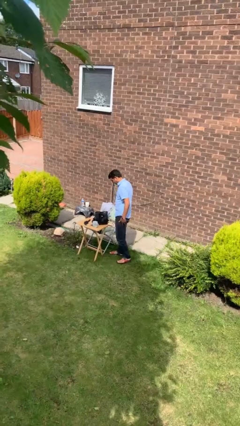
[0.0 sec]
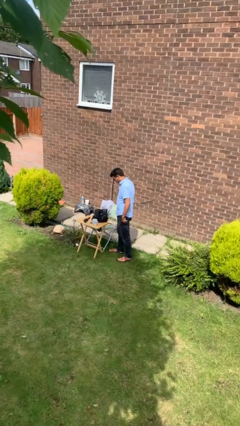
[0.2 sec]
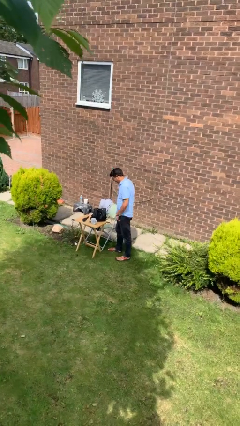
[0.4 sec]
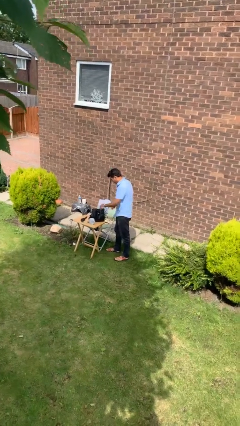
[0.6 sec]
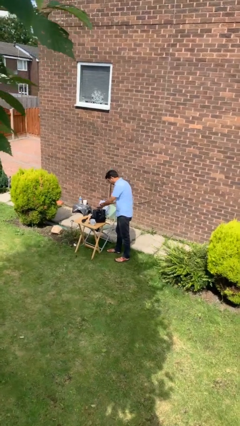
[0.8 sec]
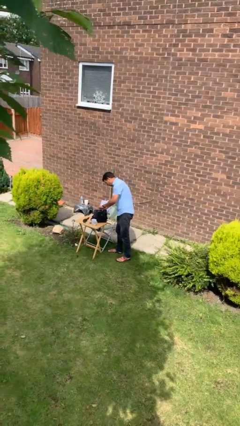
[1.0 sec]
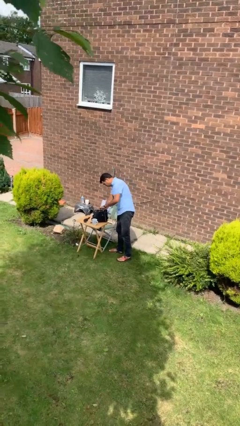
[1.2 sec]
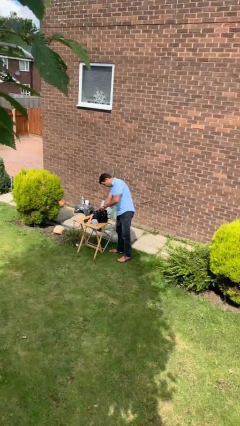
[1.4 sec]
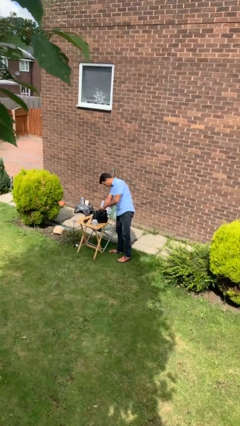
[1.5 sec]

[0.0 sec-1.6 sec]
person searches in backpack

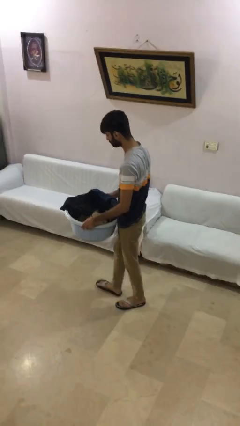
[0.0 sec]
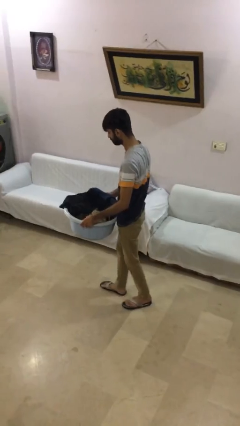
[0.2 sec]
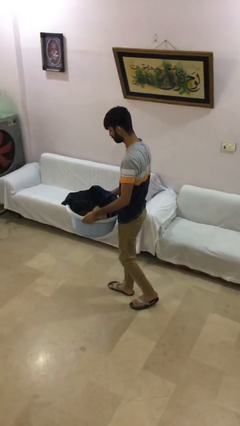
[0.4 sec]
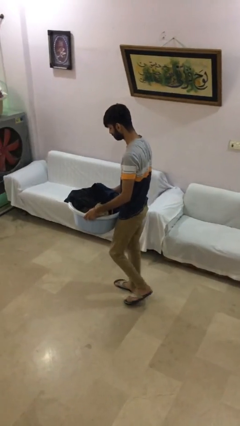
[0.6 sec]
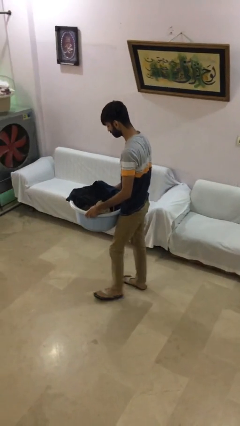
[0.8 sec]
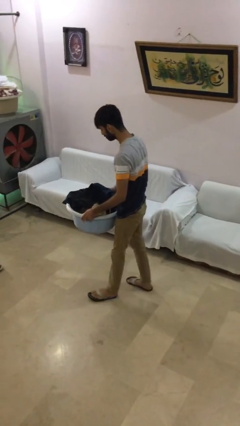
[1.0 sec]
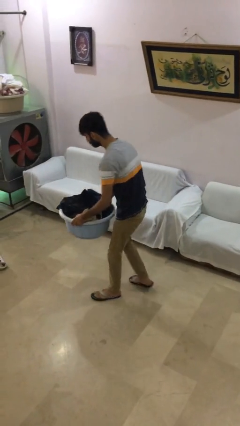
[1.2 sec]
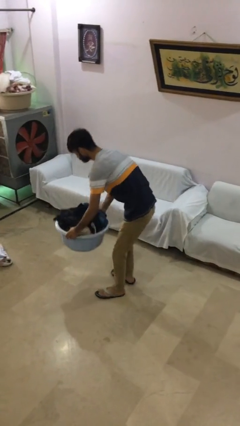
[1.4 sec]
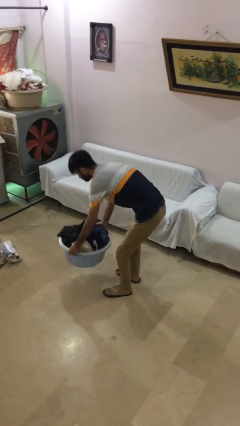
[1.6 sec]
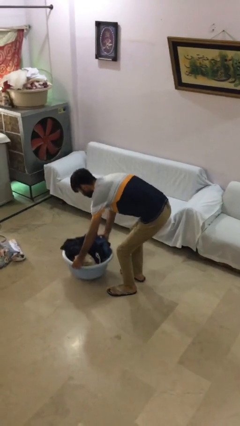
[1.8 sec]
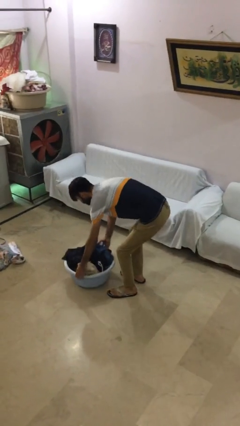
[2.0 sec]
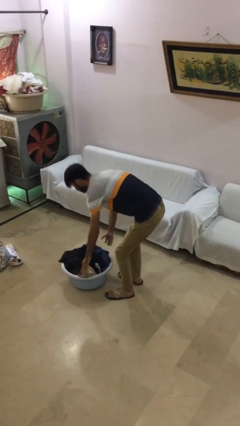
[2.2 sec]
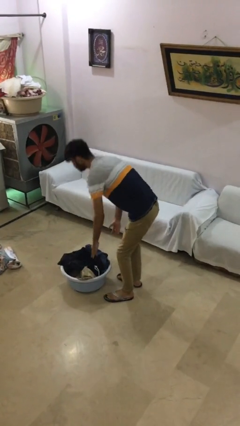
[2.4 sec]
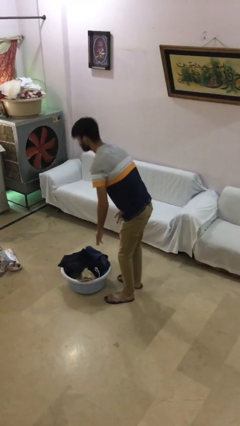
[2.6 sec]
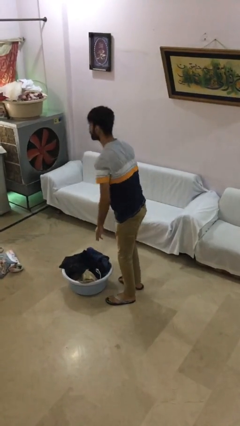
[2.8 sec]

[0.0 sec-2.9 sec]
person puts down object on floor

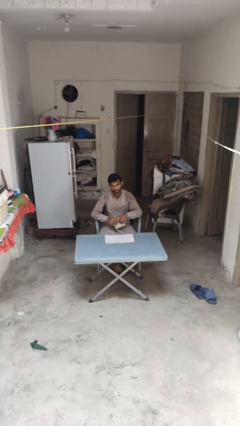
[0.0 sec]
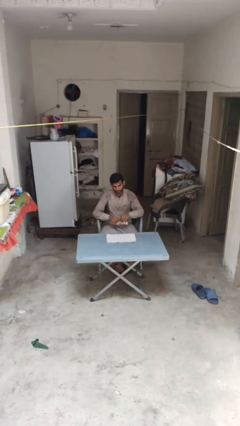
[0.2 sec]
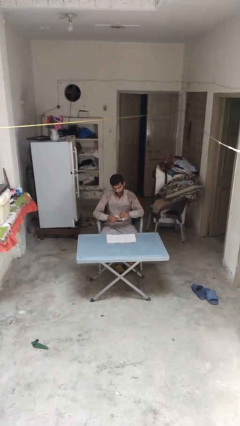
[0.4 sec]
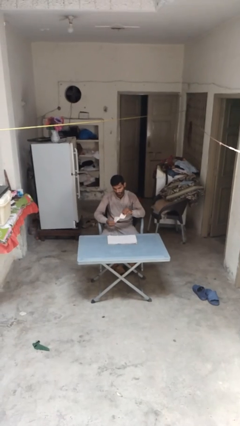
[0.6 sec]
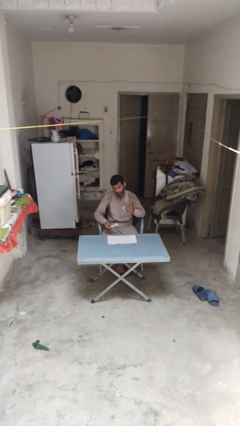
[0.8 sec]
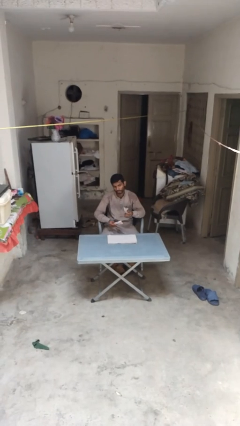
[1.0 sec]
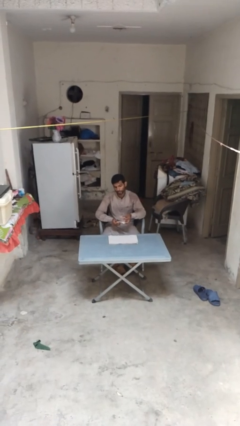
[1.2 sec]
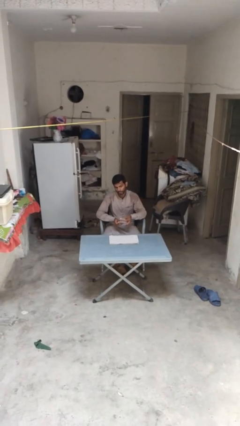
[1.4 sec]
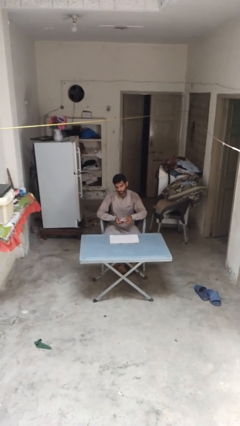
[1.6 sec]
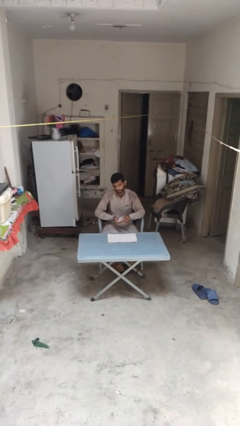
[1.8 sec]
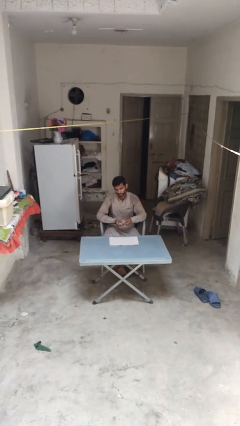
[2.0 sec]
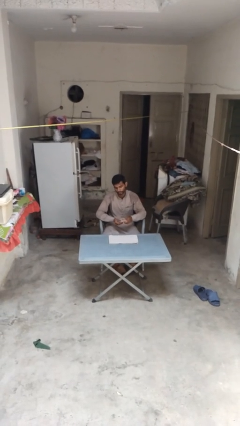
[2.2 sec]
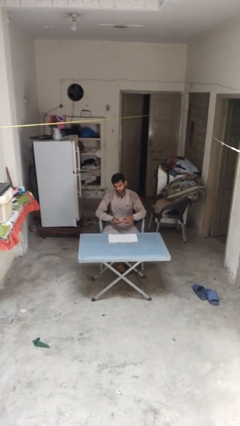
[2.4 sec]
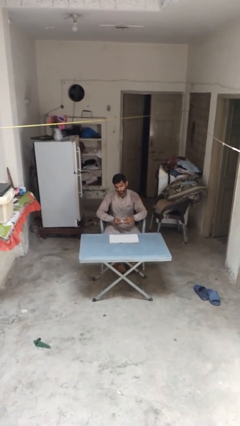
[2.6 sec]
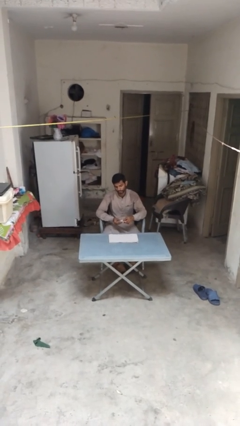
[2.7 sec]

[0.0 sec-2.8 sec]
person tears paper

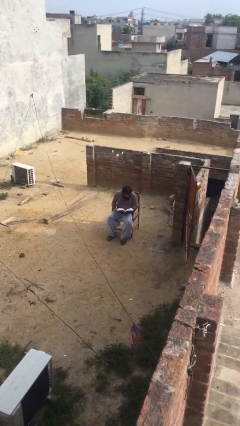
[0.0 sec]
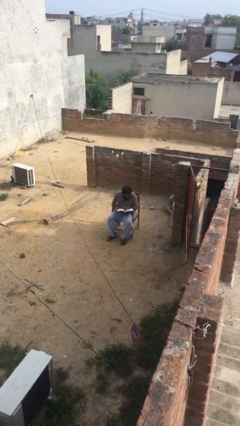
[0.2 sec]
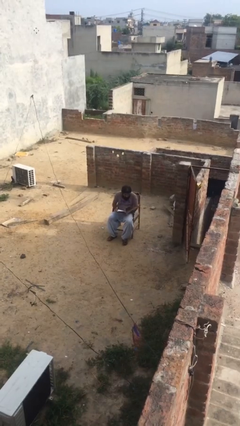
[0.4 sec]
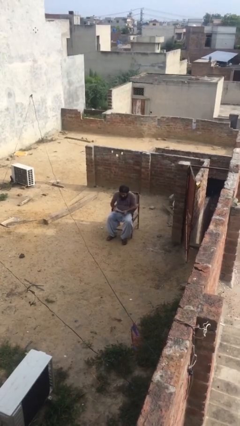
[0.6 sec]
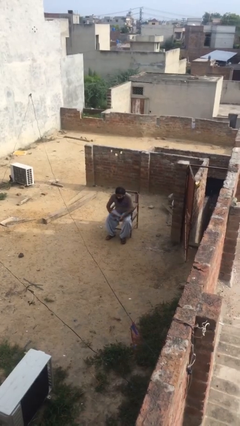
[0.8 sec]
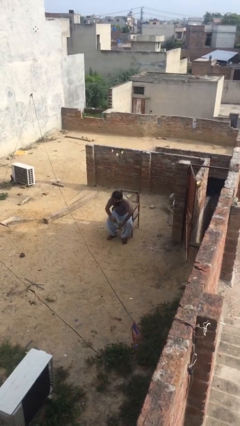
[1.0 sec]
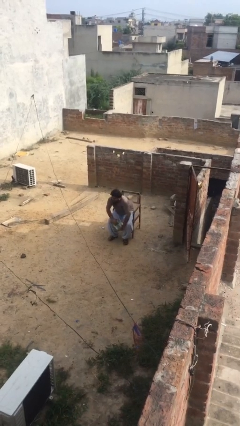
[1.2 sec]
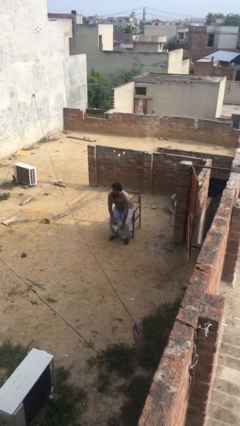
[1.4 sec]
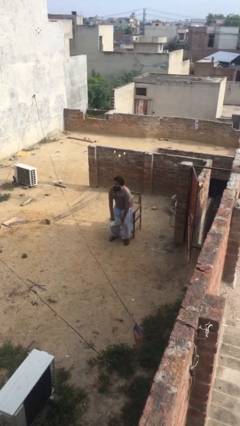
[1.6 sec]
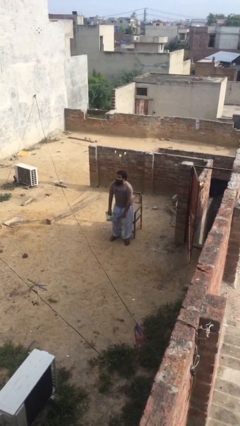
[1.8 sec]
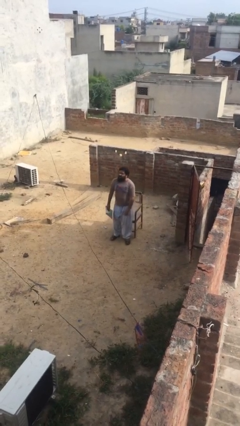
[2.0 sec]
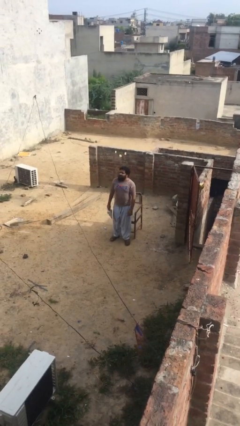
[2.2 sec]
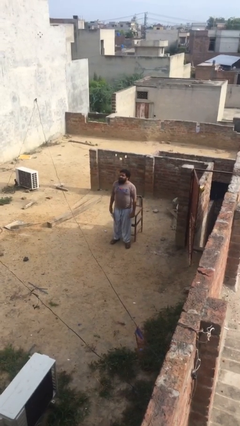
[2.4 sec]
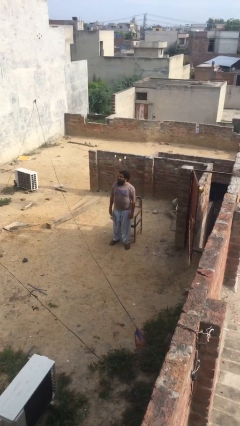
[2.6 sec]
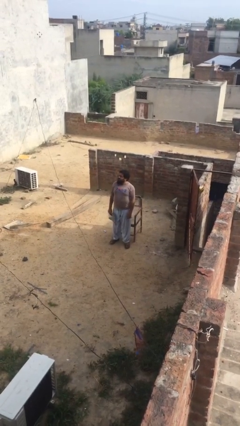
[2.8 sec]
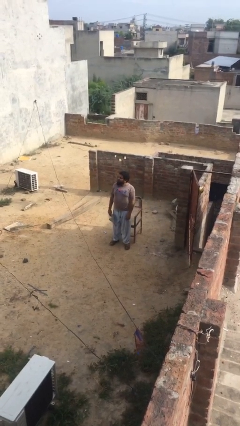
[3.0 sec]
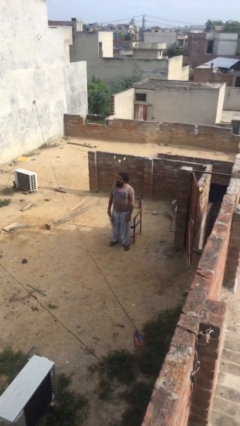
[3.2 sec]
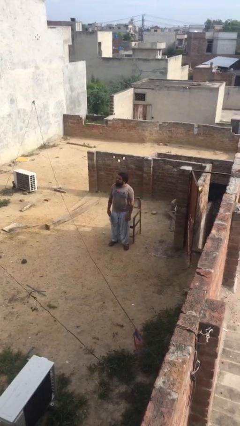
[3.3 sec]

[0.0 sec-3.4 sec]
person stands up

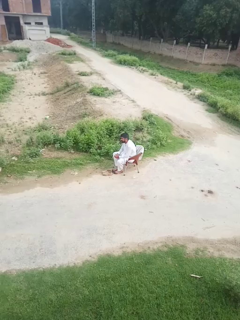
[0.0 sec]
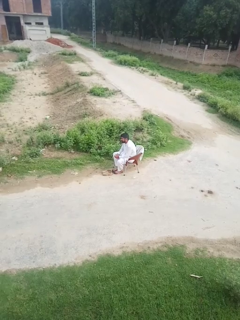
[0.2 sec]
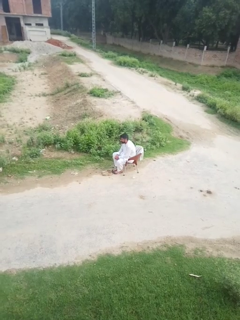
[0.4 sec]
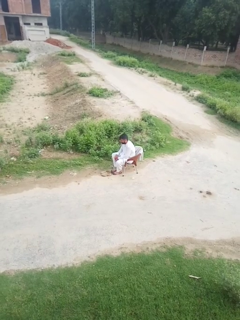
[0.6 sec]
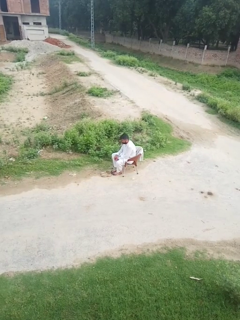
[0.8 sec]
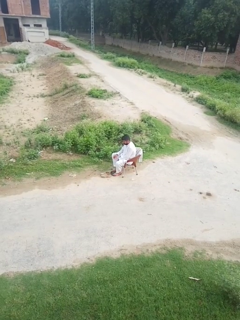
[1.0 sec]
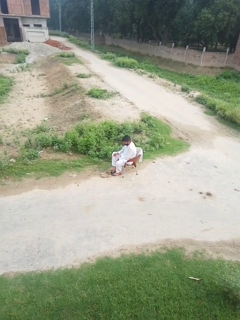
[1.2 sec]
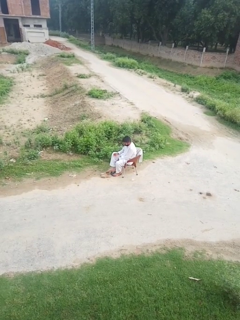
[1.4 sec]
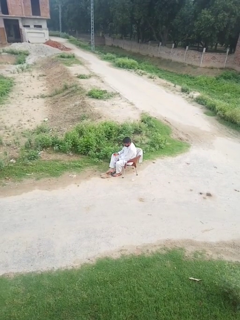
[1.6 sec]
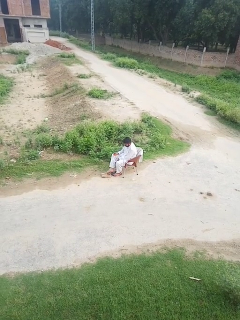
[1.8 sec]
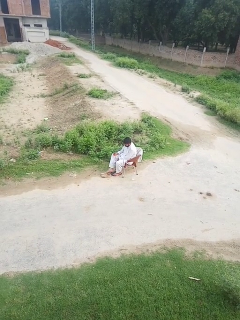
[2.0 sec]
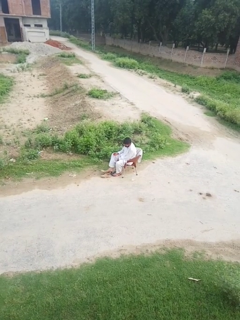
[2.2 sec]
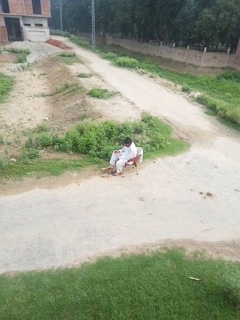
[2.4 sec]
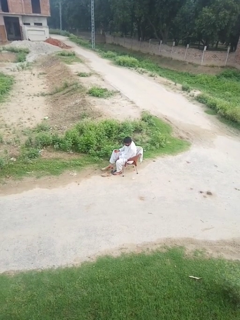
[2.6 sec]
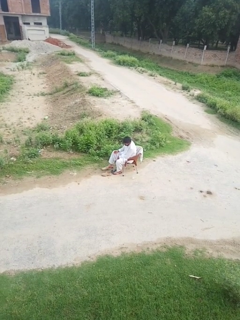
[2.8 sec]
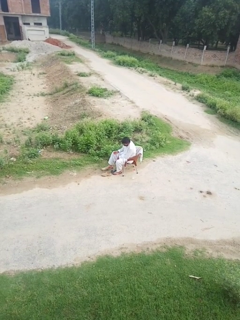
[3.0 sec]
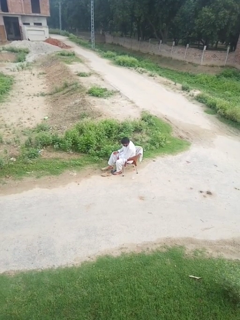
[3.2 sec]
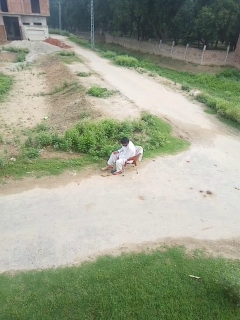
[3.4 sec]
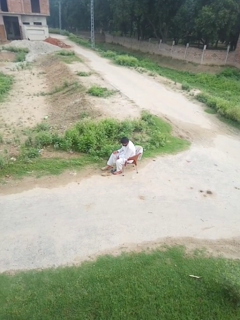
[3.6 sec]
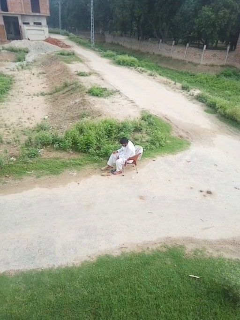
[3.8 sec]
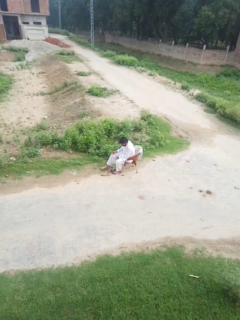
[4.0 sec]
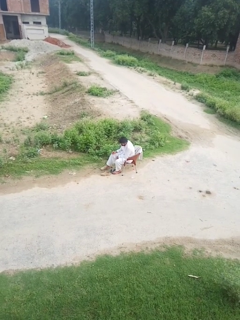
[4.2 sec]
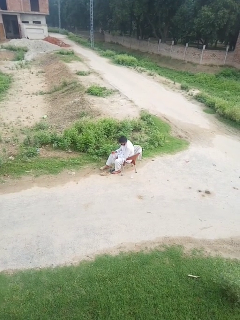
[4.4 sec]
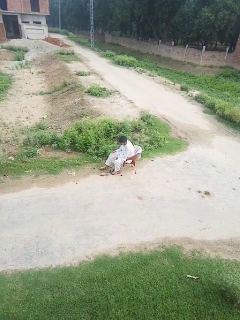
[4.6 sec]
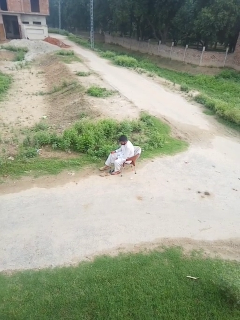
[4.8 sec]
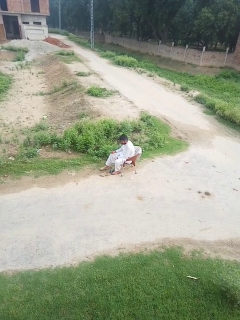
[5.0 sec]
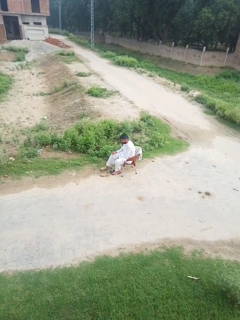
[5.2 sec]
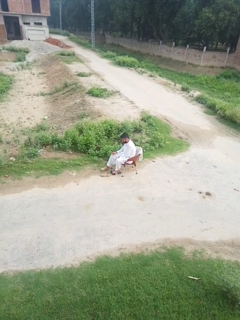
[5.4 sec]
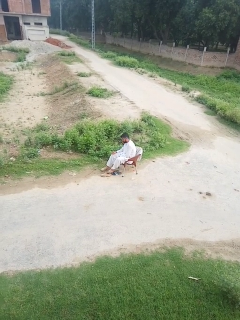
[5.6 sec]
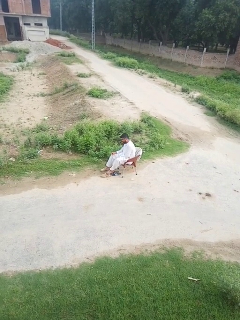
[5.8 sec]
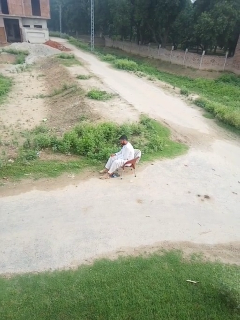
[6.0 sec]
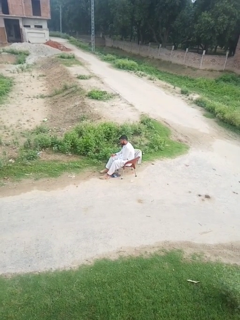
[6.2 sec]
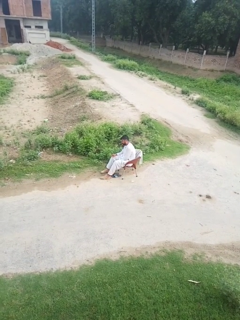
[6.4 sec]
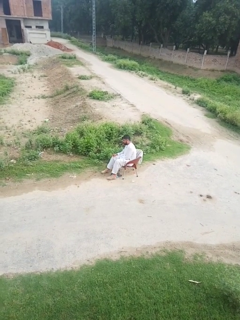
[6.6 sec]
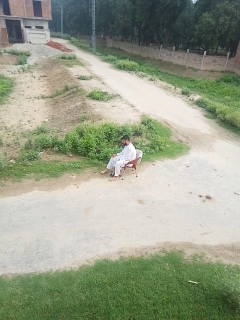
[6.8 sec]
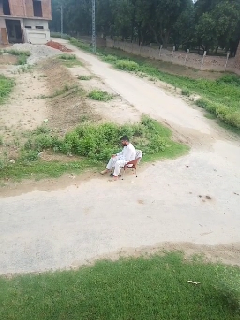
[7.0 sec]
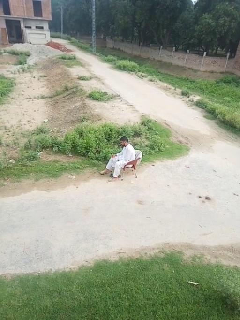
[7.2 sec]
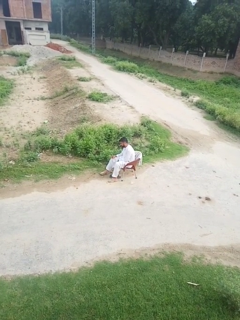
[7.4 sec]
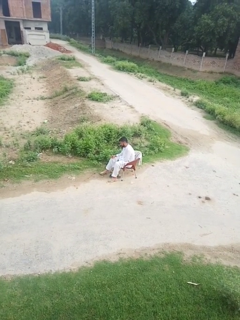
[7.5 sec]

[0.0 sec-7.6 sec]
person puts on shoes

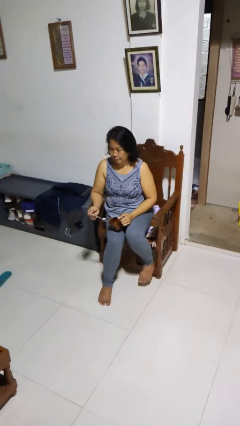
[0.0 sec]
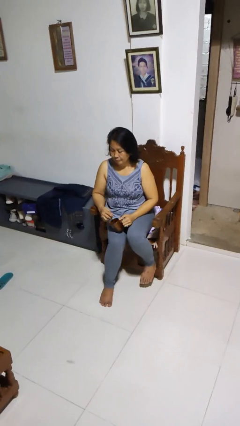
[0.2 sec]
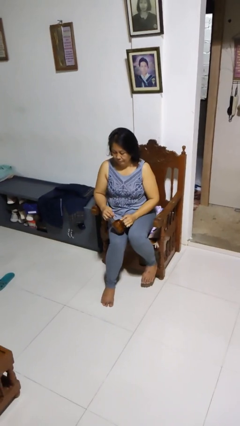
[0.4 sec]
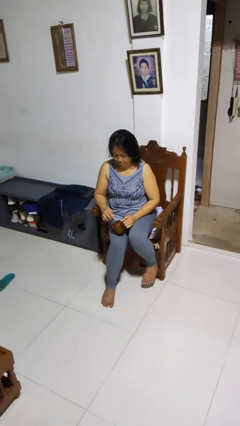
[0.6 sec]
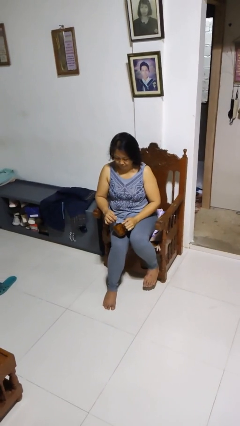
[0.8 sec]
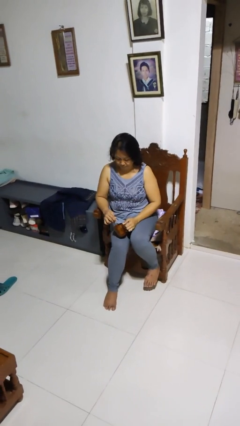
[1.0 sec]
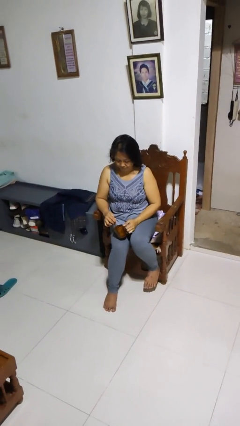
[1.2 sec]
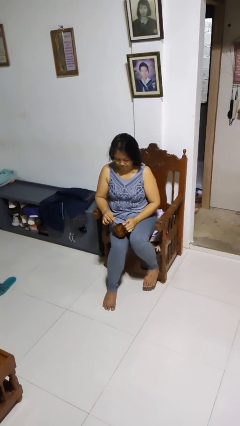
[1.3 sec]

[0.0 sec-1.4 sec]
person stirs mug
